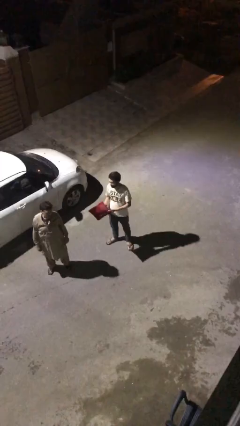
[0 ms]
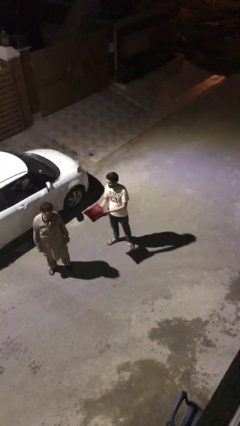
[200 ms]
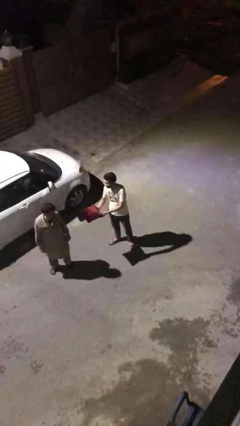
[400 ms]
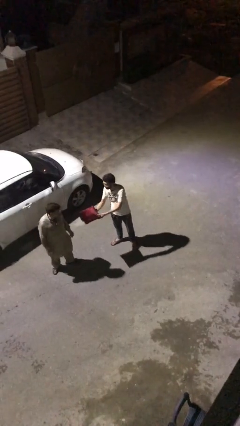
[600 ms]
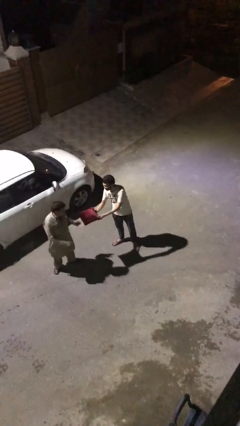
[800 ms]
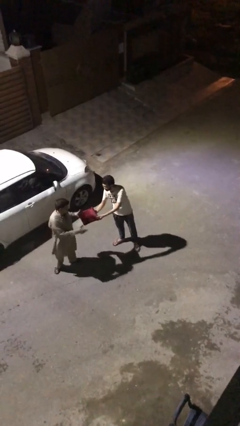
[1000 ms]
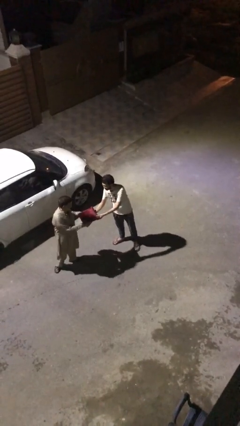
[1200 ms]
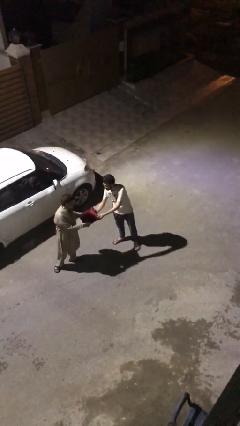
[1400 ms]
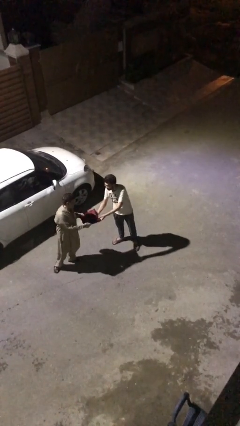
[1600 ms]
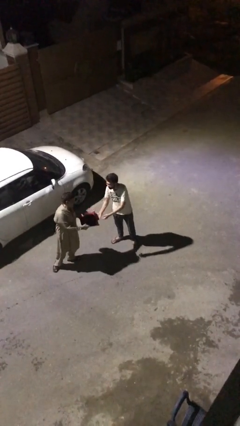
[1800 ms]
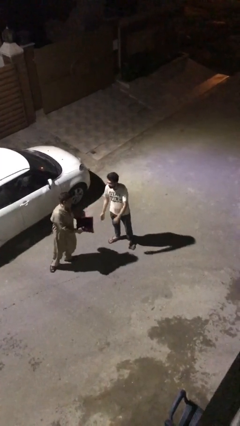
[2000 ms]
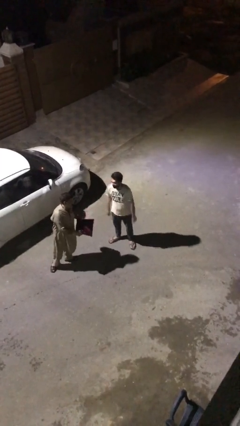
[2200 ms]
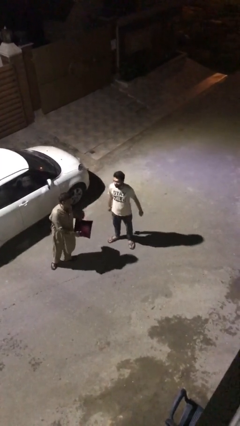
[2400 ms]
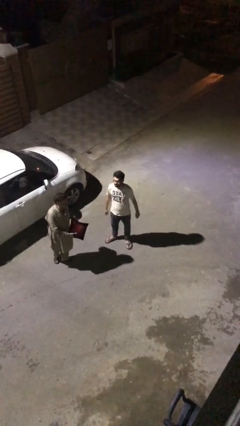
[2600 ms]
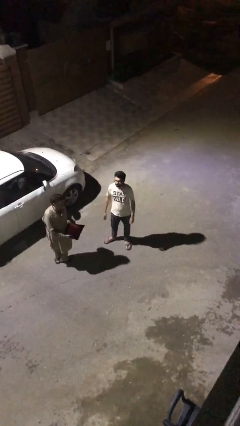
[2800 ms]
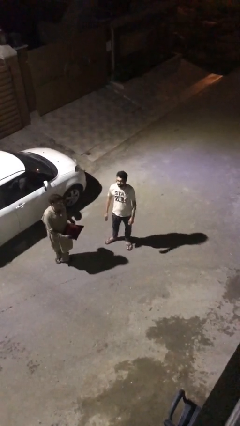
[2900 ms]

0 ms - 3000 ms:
person transfers object to person

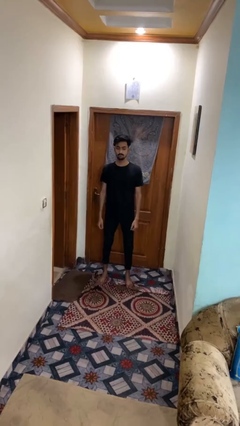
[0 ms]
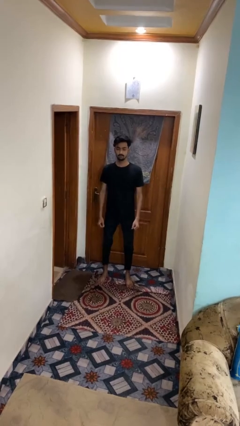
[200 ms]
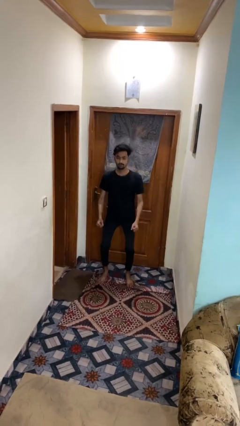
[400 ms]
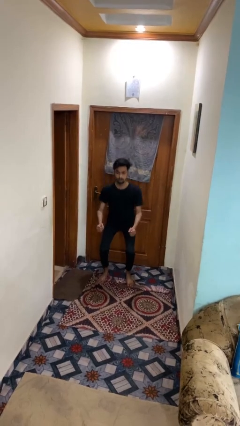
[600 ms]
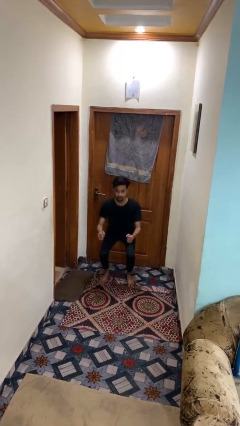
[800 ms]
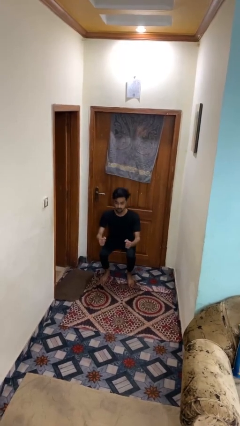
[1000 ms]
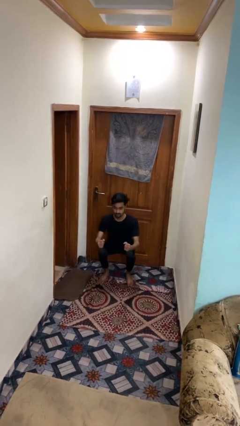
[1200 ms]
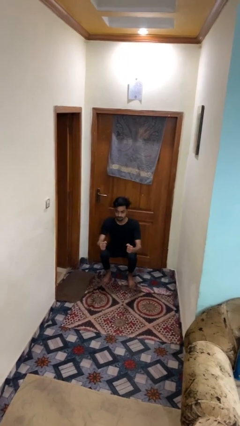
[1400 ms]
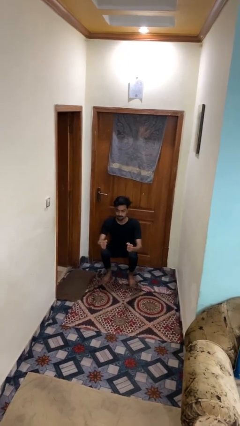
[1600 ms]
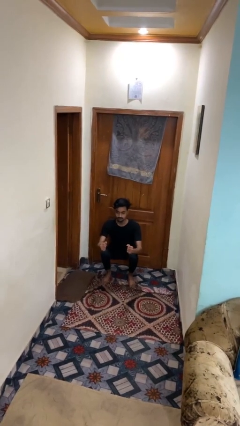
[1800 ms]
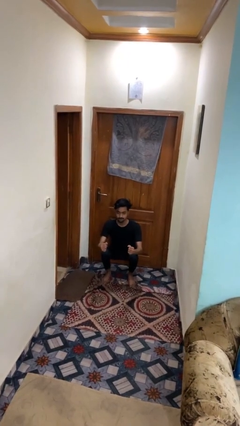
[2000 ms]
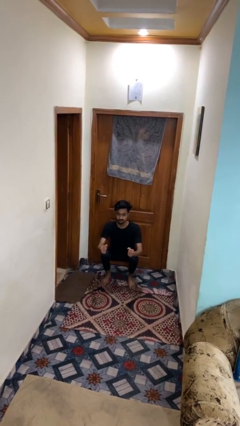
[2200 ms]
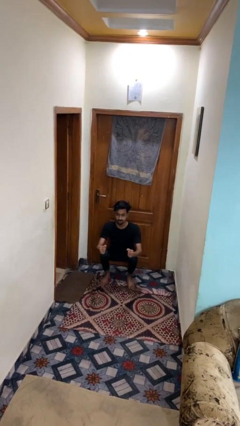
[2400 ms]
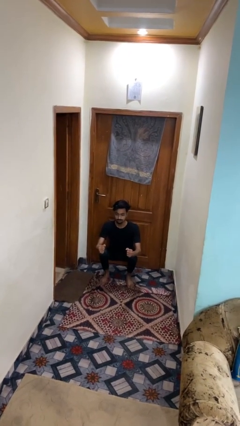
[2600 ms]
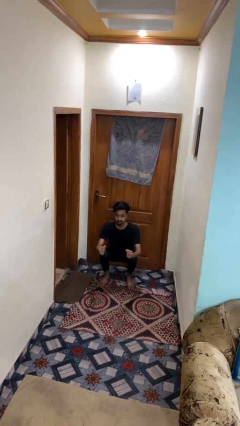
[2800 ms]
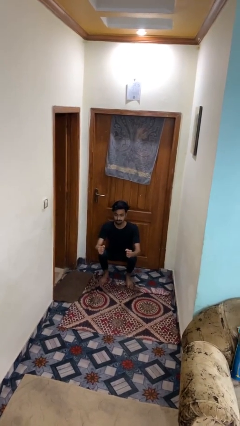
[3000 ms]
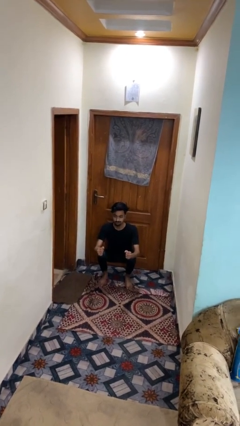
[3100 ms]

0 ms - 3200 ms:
person squats

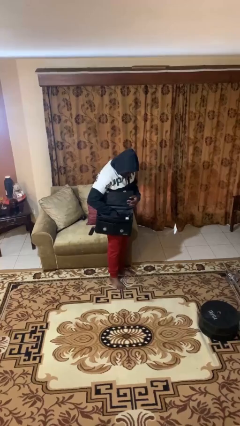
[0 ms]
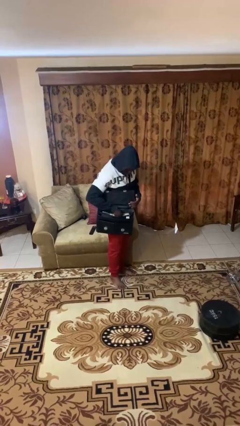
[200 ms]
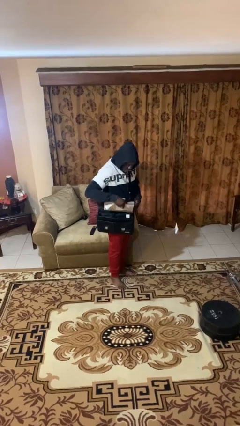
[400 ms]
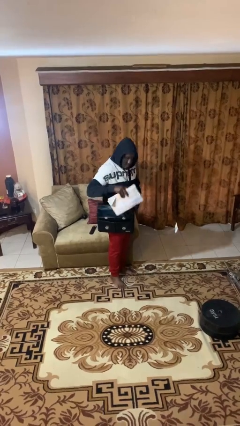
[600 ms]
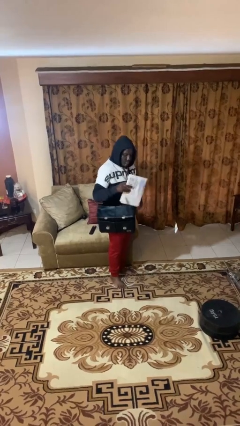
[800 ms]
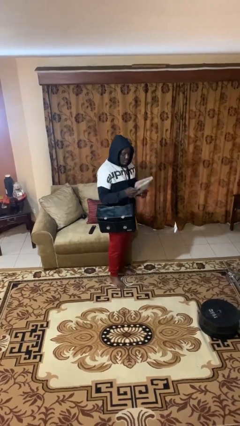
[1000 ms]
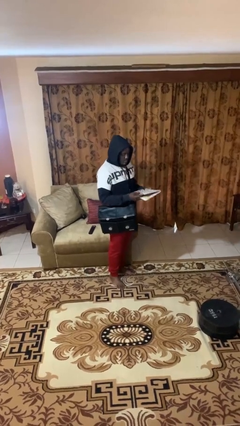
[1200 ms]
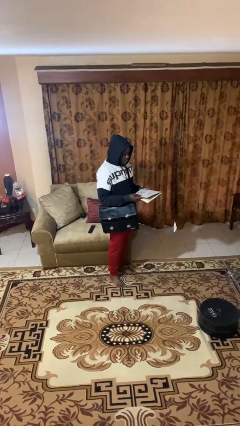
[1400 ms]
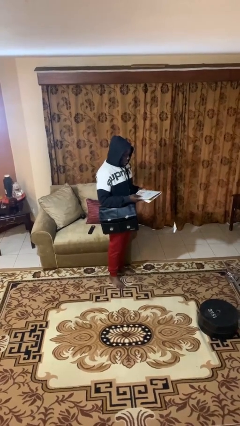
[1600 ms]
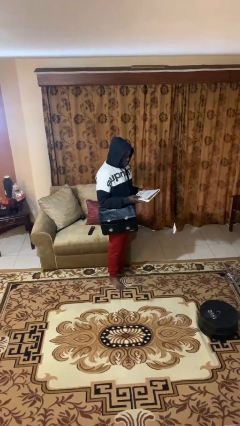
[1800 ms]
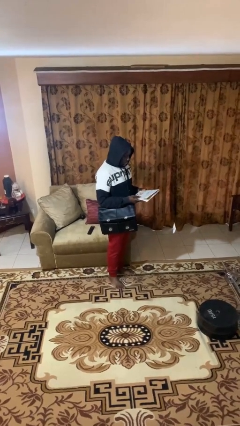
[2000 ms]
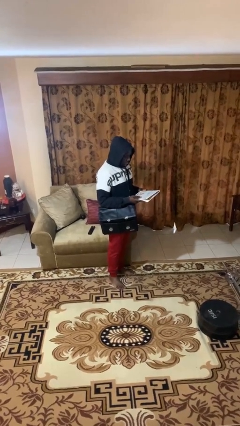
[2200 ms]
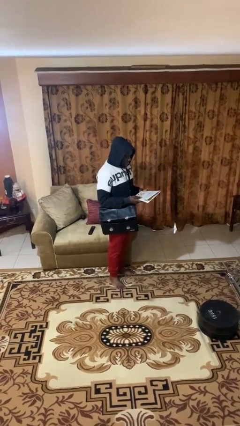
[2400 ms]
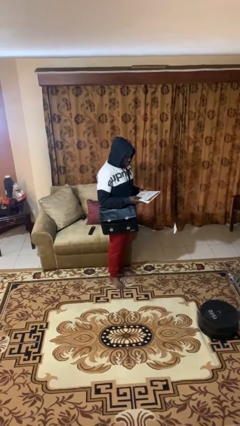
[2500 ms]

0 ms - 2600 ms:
person takes object from purse

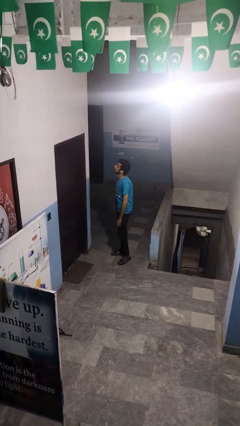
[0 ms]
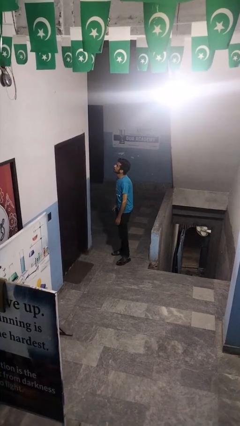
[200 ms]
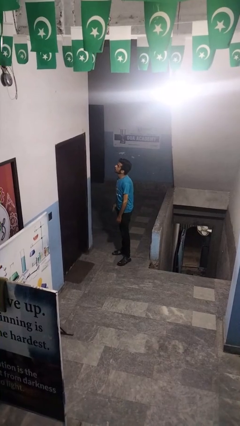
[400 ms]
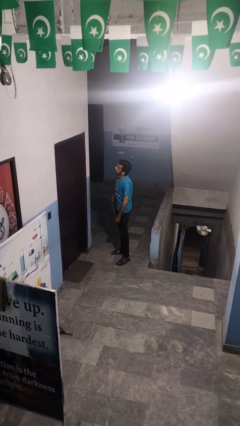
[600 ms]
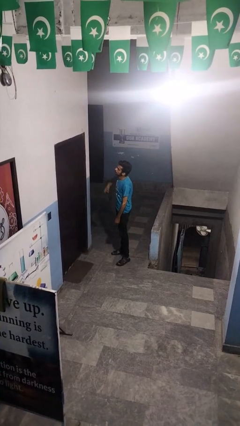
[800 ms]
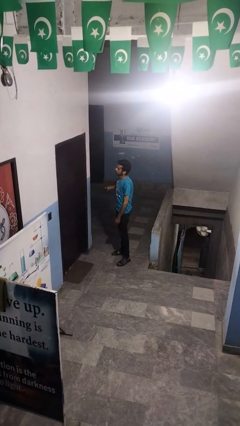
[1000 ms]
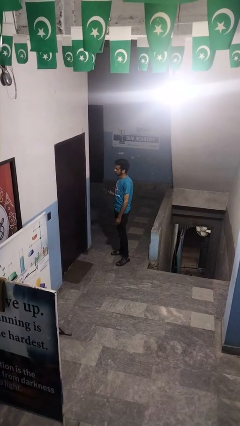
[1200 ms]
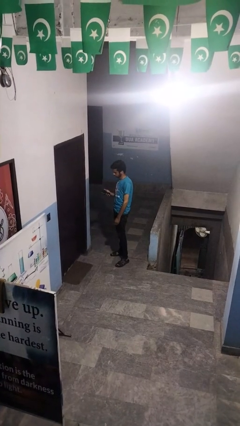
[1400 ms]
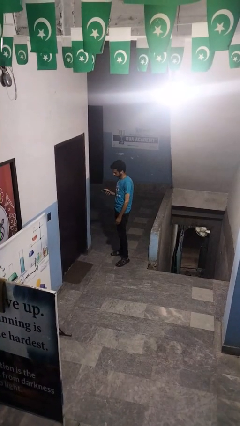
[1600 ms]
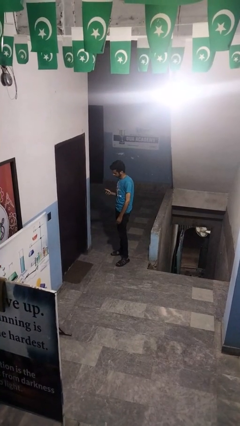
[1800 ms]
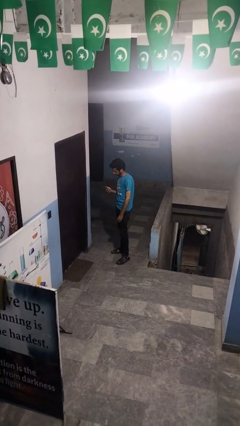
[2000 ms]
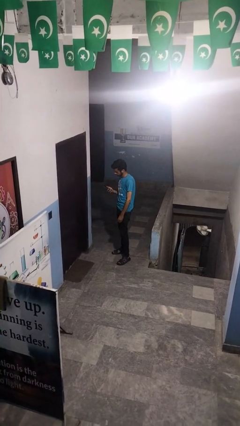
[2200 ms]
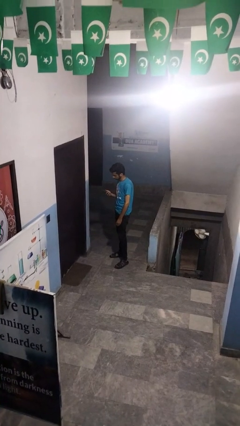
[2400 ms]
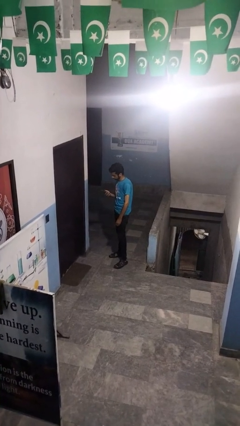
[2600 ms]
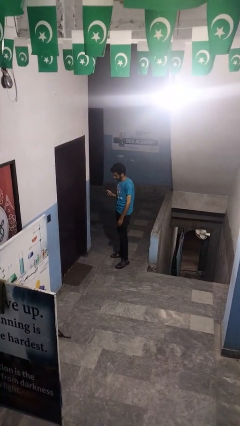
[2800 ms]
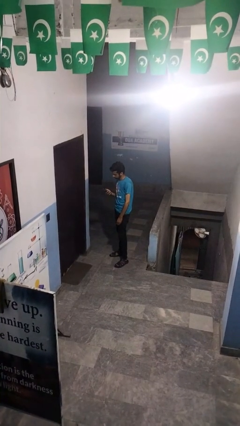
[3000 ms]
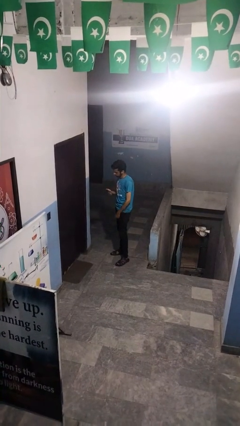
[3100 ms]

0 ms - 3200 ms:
person takes phone from pocket

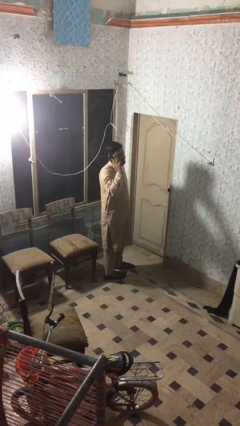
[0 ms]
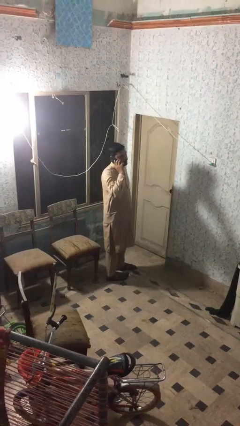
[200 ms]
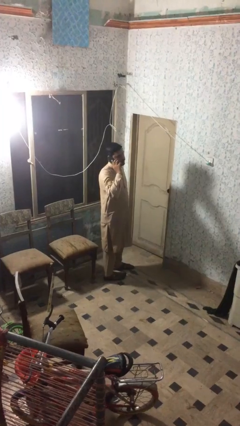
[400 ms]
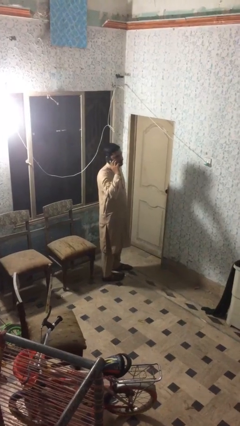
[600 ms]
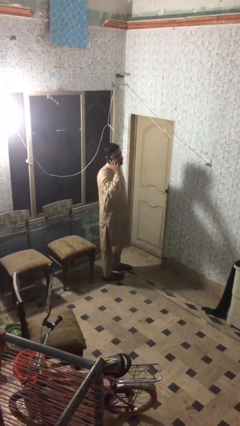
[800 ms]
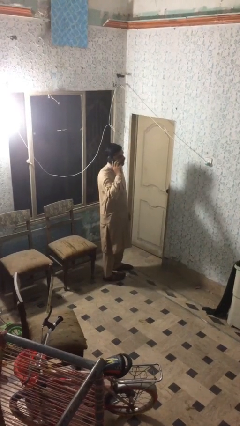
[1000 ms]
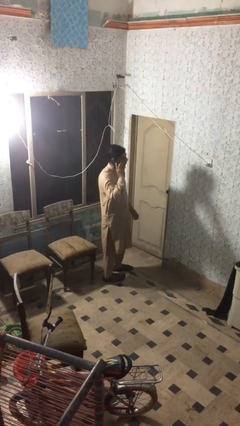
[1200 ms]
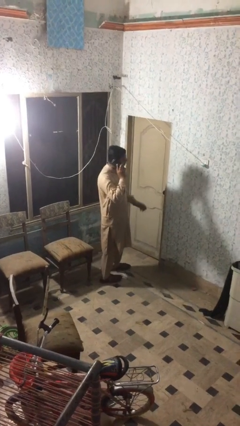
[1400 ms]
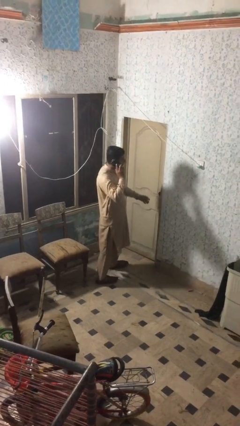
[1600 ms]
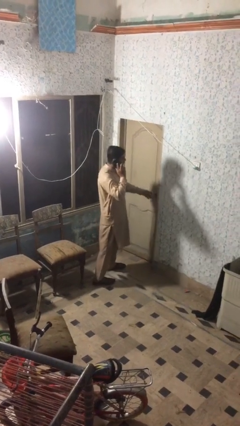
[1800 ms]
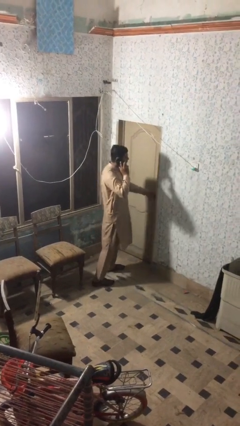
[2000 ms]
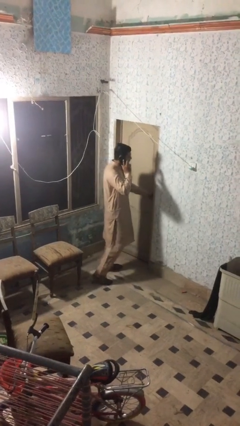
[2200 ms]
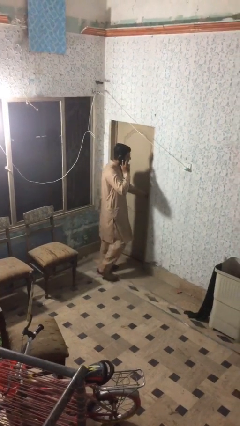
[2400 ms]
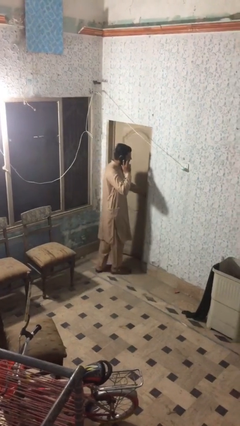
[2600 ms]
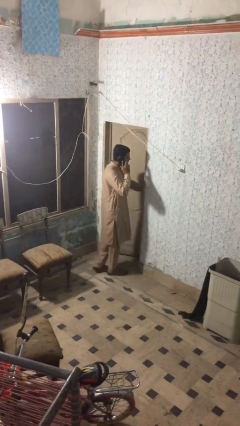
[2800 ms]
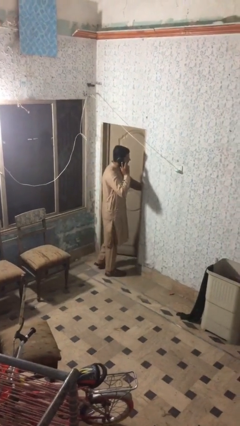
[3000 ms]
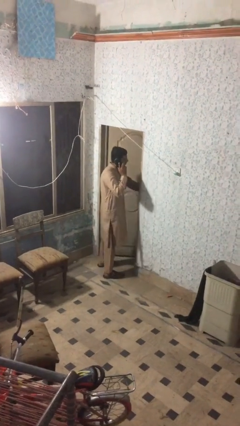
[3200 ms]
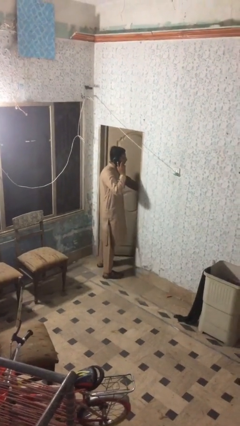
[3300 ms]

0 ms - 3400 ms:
person opens facility door

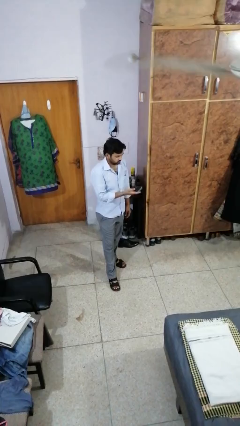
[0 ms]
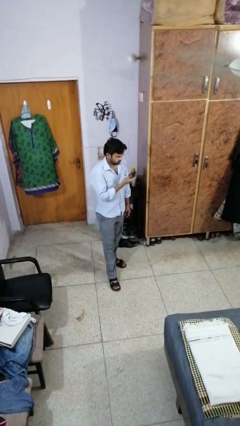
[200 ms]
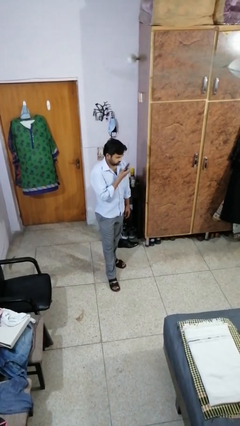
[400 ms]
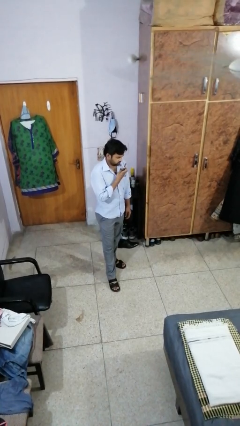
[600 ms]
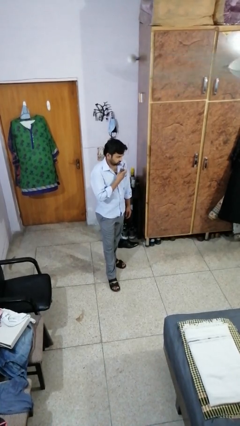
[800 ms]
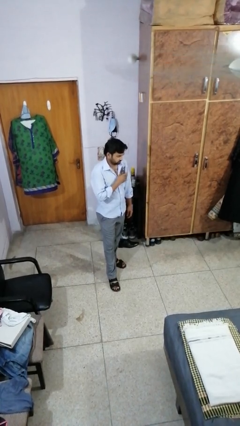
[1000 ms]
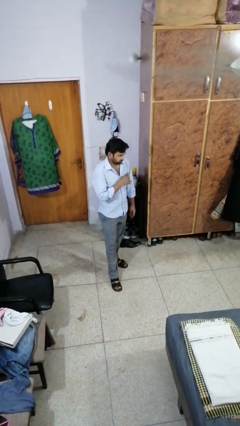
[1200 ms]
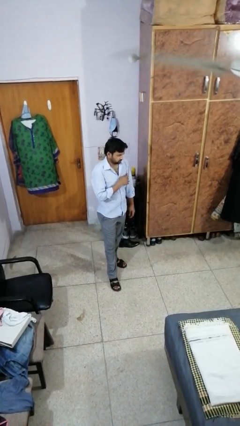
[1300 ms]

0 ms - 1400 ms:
person puts phone into pocket

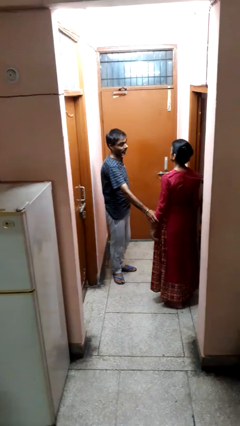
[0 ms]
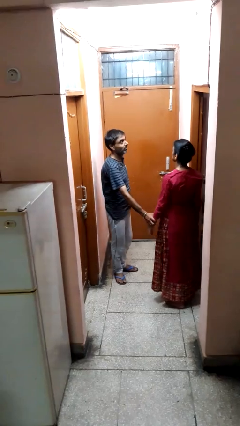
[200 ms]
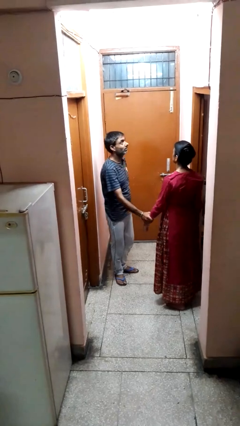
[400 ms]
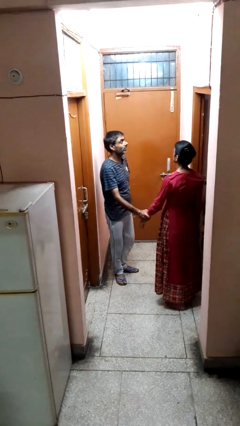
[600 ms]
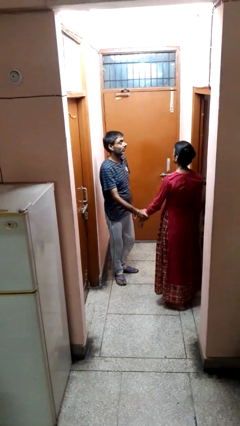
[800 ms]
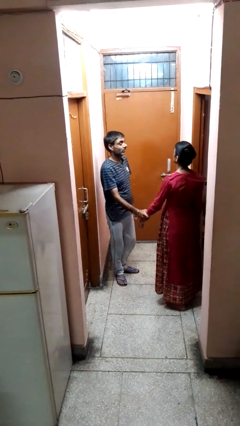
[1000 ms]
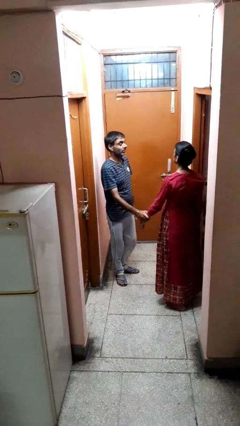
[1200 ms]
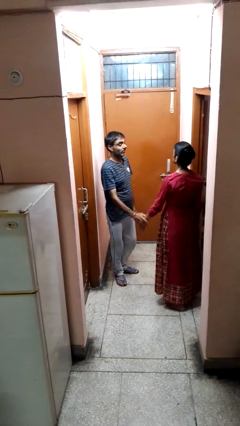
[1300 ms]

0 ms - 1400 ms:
person grabs person by forearm
